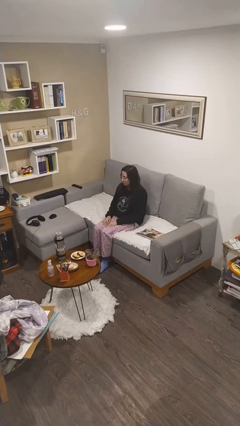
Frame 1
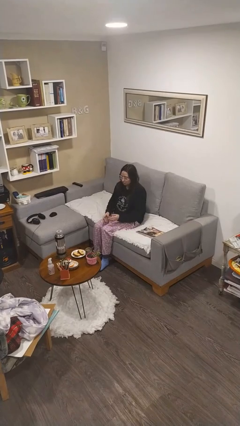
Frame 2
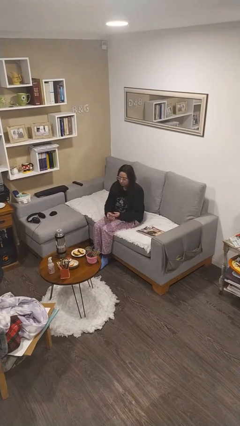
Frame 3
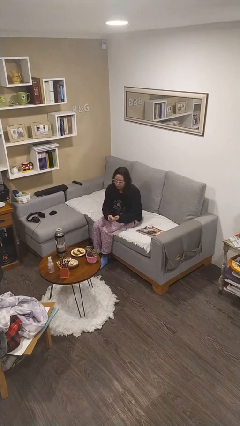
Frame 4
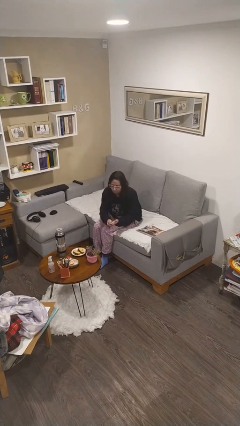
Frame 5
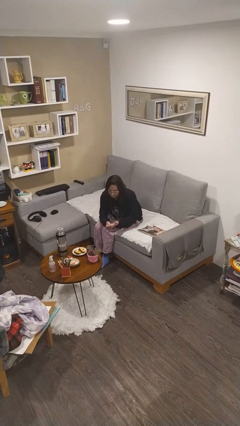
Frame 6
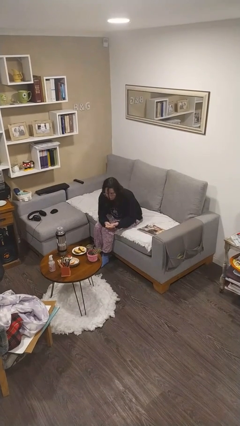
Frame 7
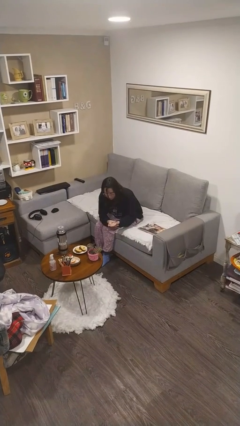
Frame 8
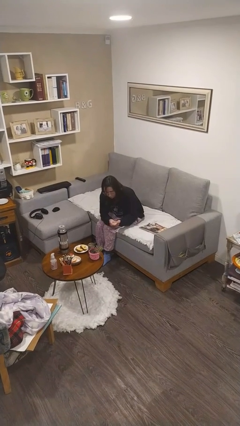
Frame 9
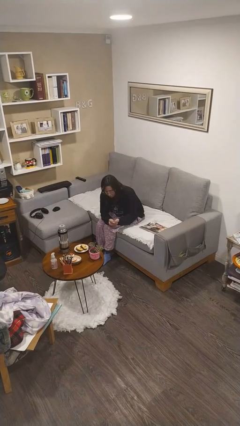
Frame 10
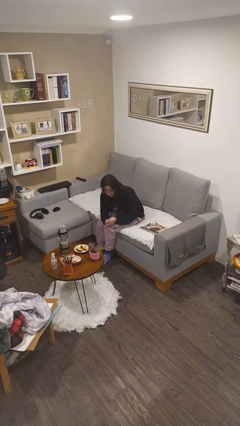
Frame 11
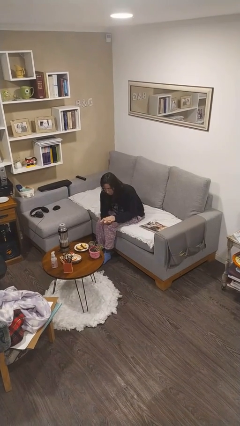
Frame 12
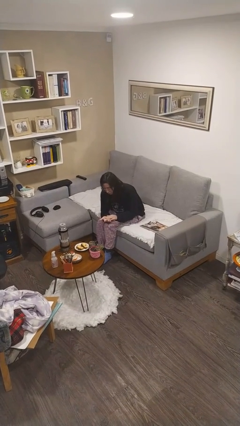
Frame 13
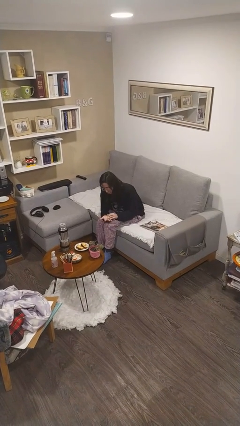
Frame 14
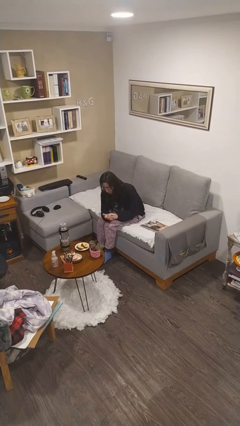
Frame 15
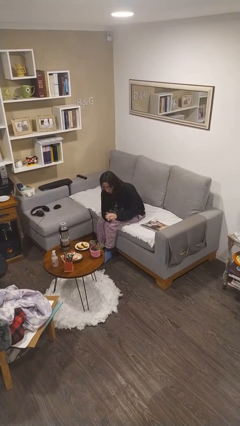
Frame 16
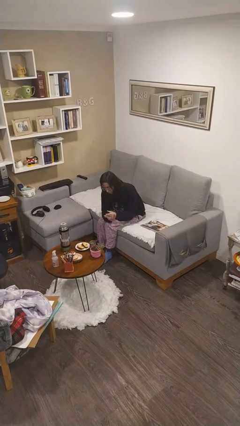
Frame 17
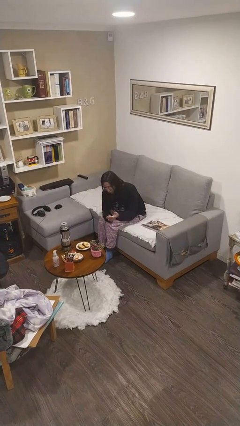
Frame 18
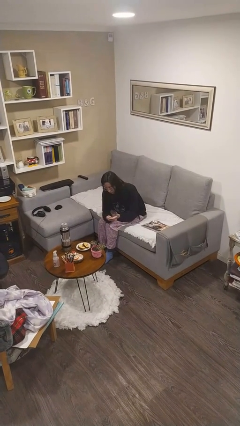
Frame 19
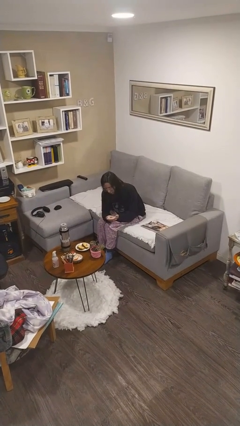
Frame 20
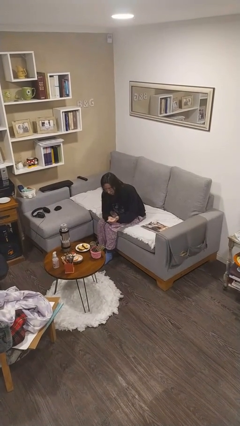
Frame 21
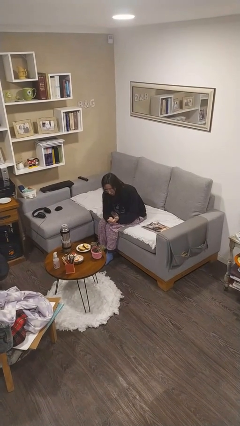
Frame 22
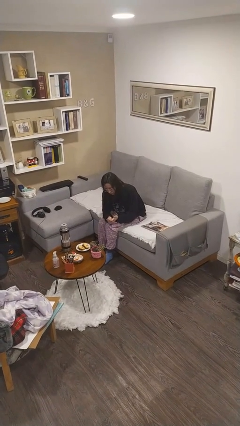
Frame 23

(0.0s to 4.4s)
person looks at hands in lap

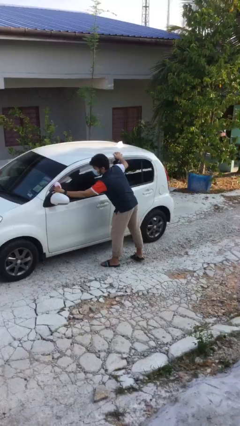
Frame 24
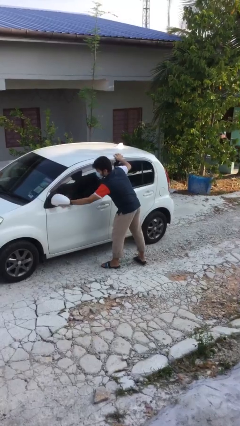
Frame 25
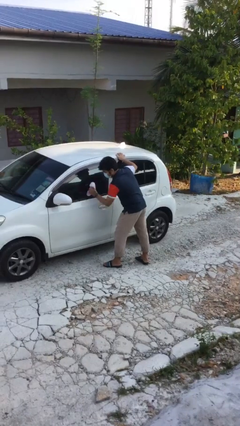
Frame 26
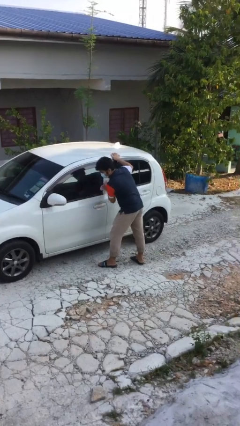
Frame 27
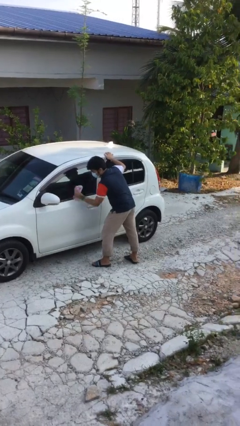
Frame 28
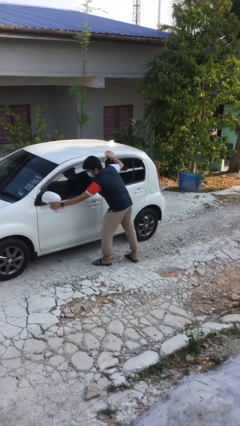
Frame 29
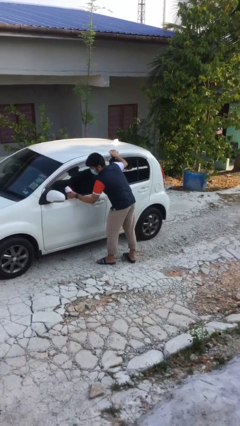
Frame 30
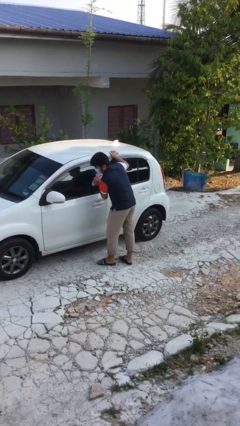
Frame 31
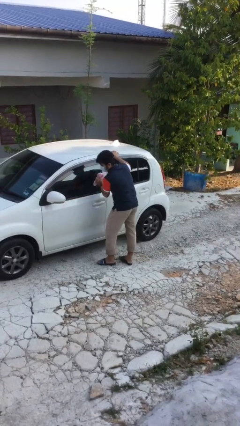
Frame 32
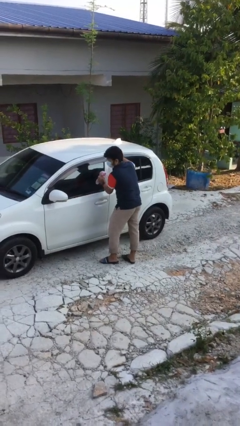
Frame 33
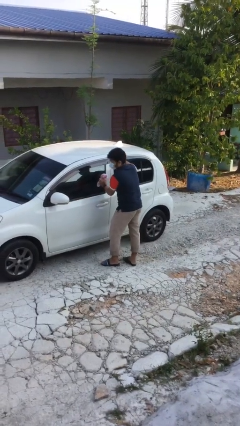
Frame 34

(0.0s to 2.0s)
person polishes car with rag

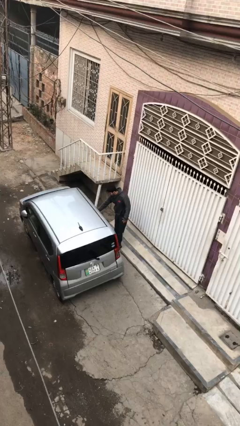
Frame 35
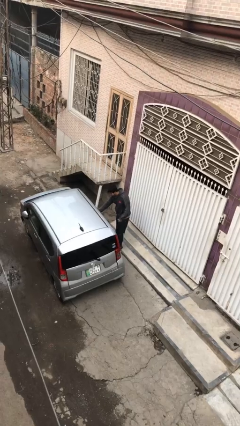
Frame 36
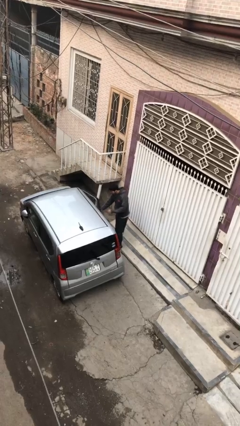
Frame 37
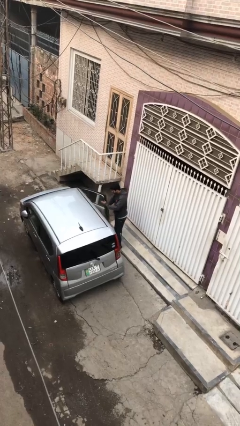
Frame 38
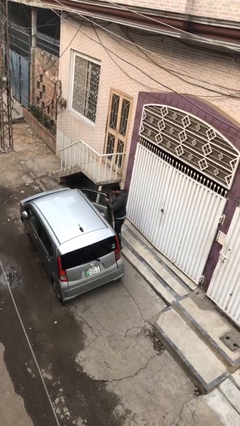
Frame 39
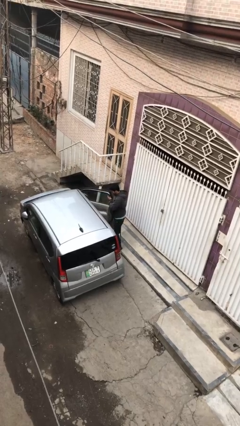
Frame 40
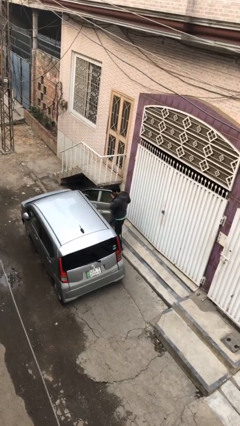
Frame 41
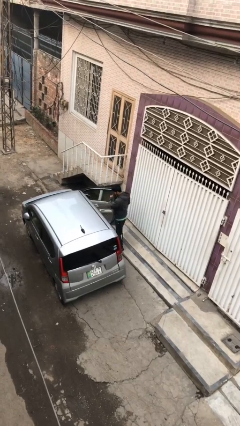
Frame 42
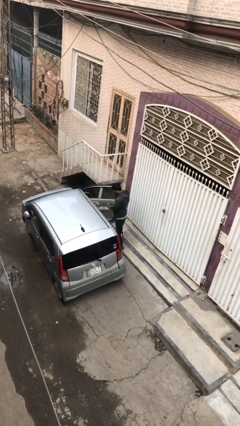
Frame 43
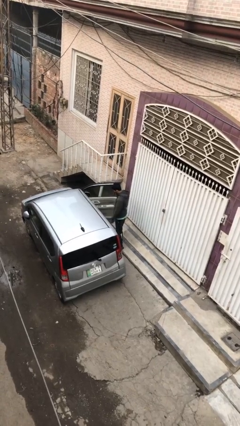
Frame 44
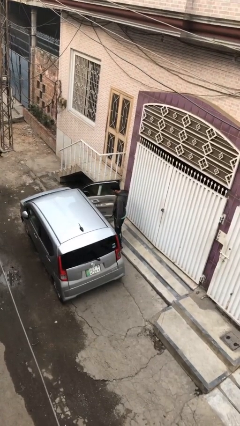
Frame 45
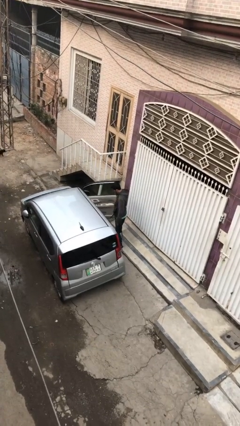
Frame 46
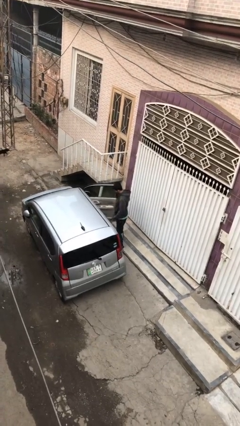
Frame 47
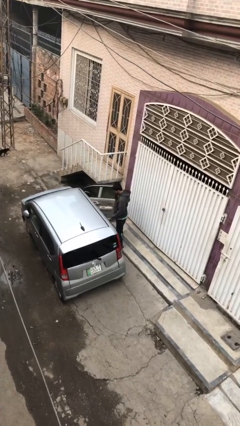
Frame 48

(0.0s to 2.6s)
person opens car door

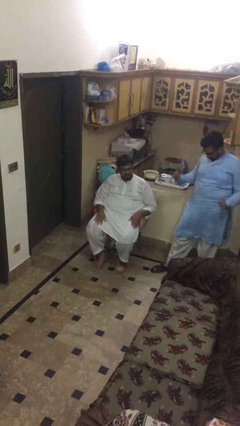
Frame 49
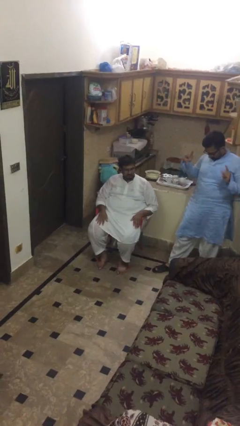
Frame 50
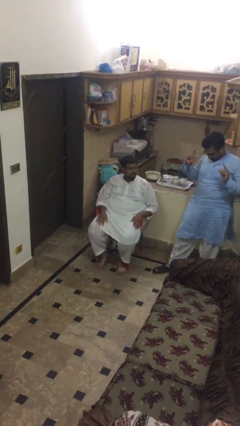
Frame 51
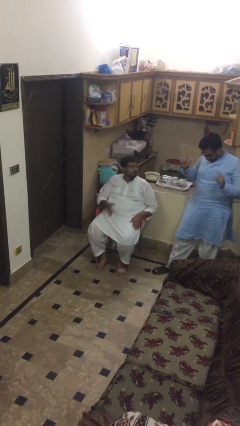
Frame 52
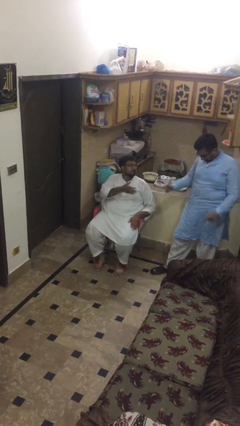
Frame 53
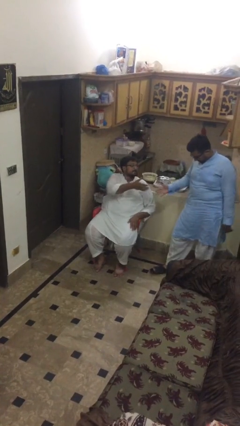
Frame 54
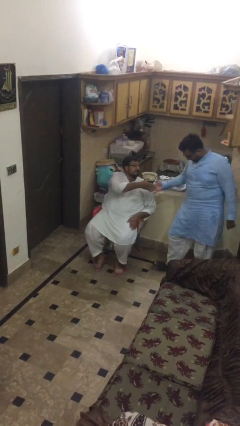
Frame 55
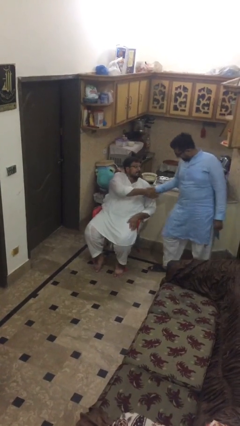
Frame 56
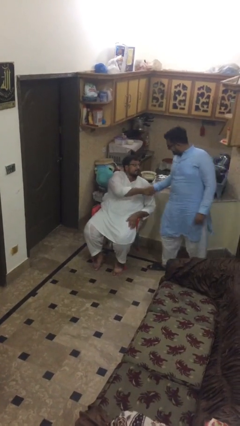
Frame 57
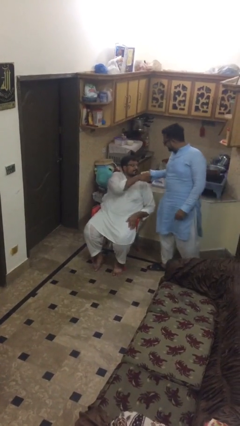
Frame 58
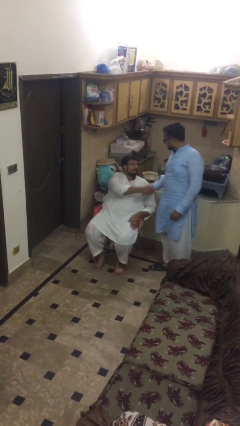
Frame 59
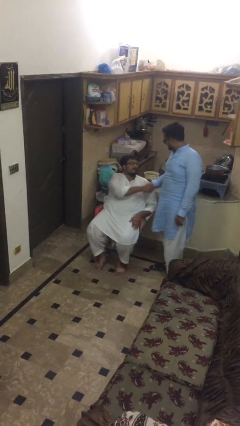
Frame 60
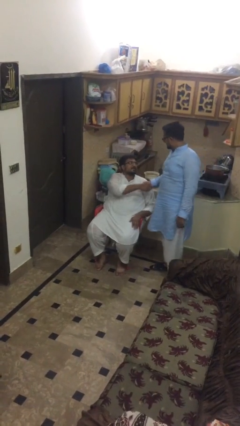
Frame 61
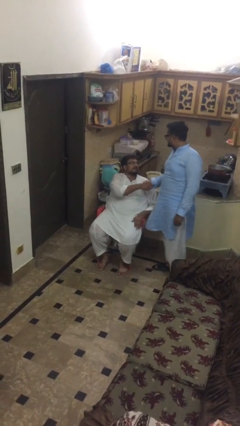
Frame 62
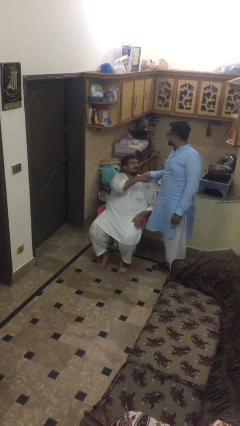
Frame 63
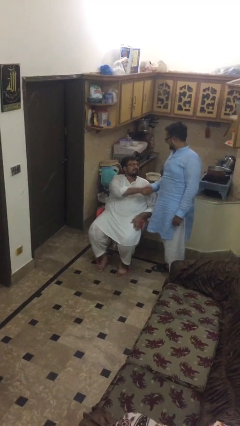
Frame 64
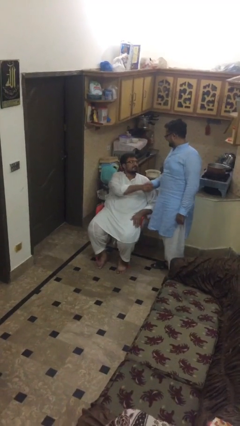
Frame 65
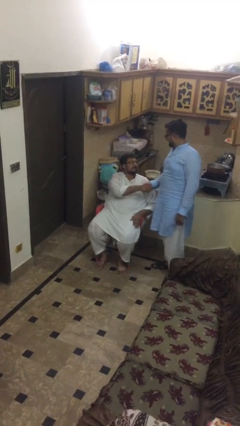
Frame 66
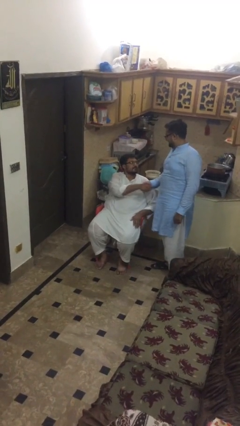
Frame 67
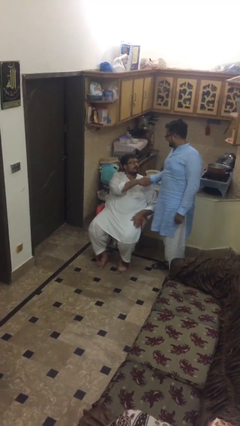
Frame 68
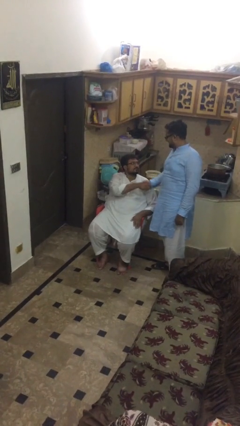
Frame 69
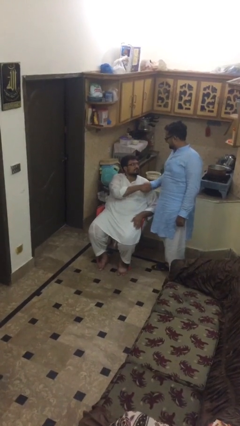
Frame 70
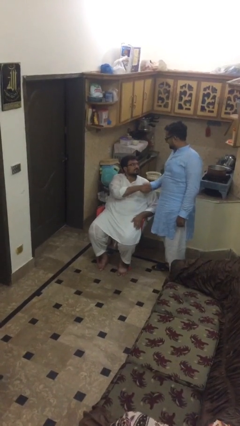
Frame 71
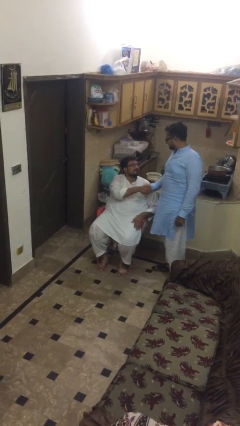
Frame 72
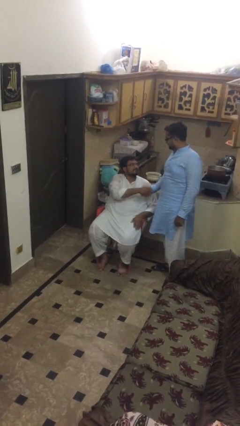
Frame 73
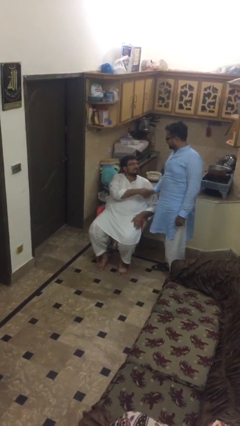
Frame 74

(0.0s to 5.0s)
person shakes hand

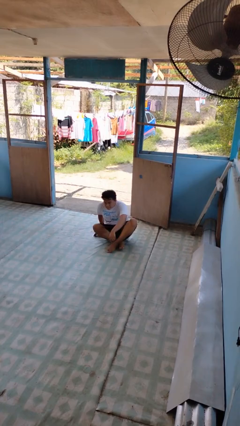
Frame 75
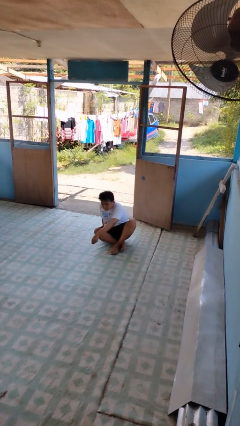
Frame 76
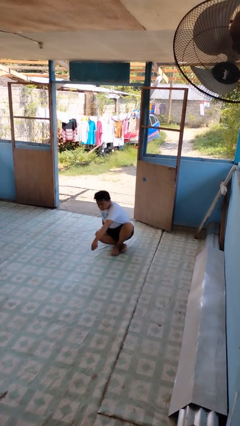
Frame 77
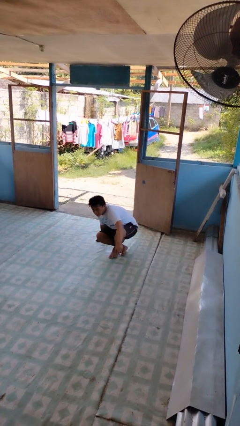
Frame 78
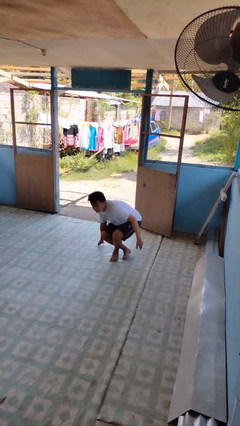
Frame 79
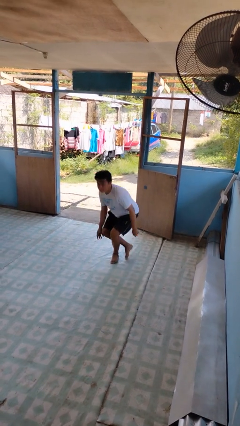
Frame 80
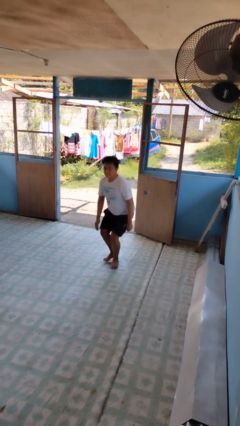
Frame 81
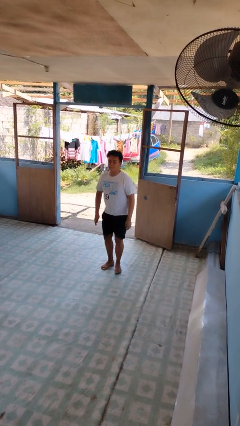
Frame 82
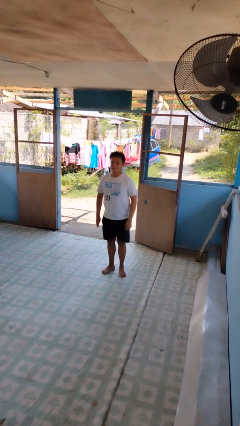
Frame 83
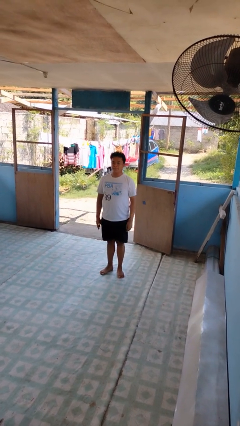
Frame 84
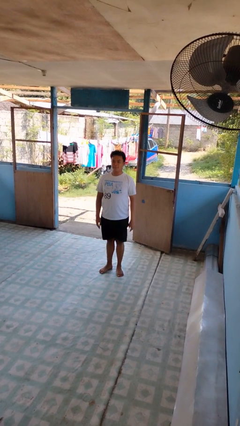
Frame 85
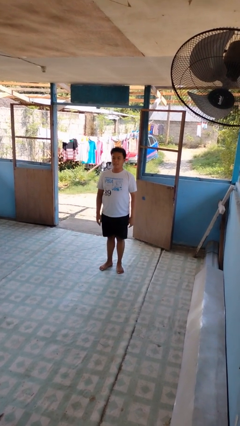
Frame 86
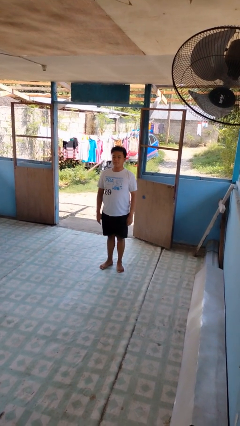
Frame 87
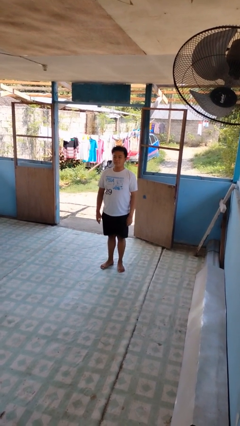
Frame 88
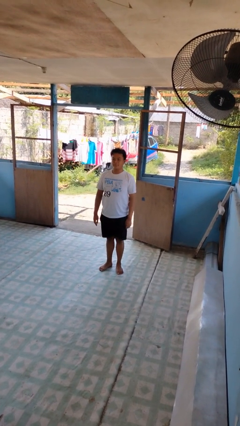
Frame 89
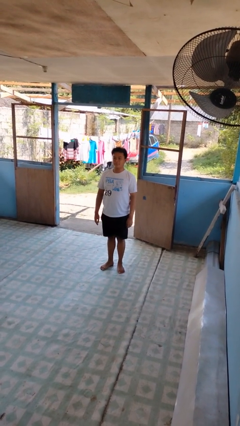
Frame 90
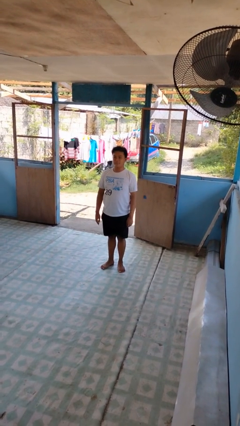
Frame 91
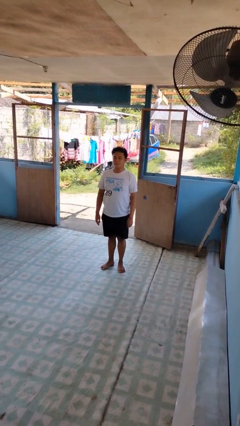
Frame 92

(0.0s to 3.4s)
person stands up from floor
